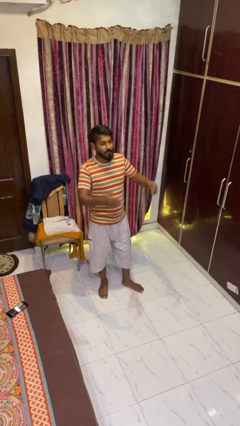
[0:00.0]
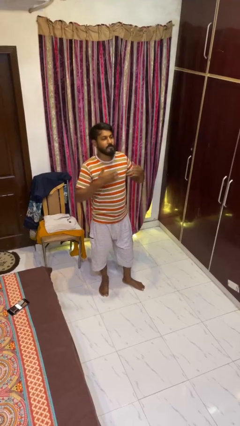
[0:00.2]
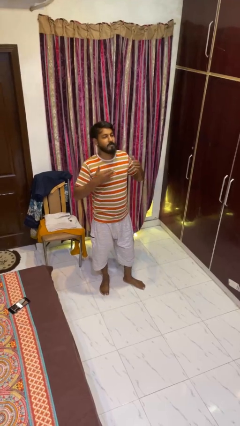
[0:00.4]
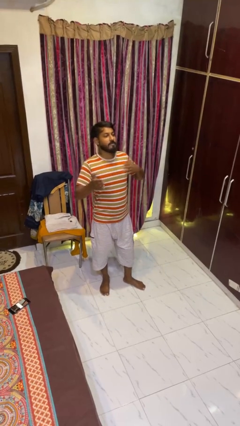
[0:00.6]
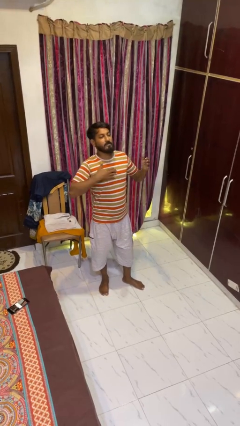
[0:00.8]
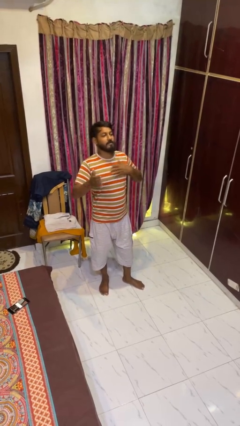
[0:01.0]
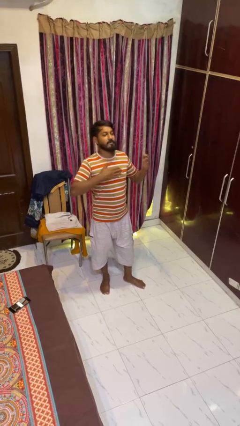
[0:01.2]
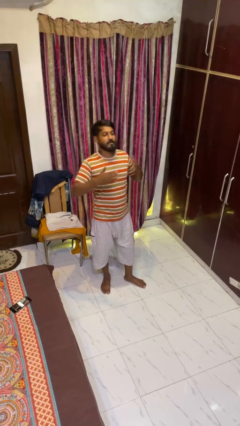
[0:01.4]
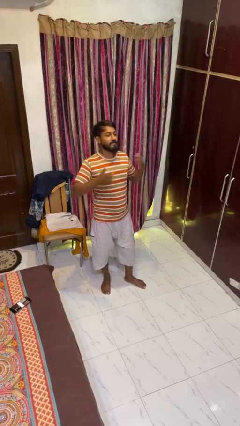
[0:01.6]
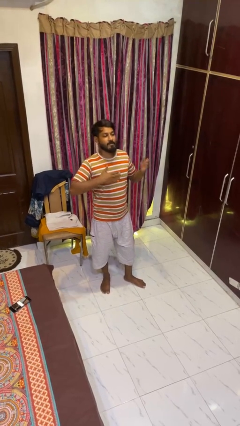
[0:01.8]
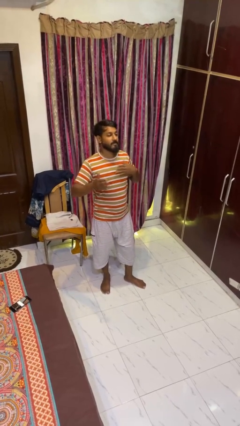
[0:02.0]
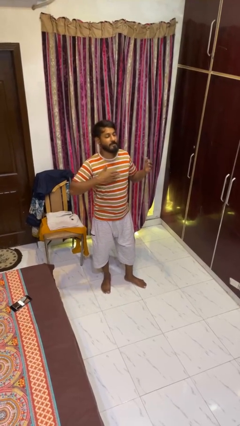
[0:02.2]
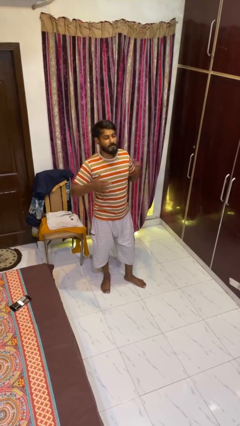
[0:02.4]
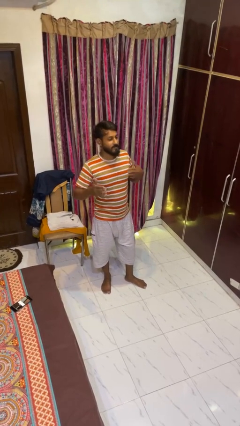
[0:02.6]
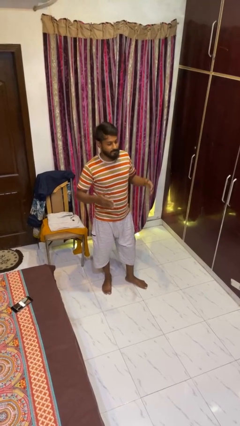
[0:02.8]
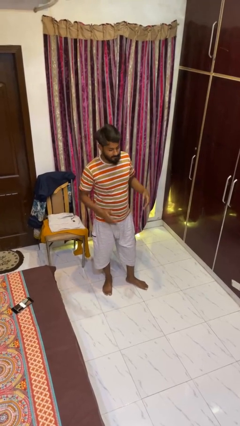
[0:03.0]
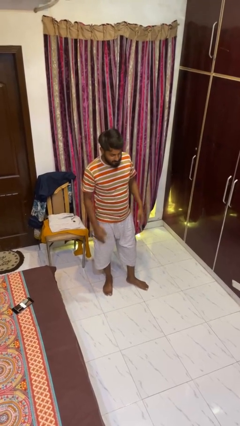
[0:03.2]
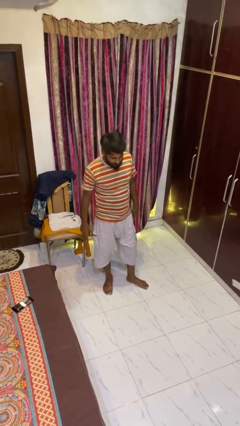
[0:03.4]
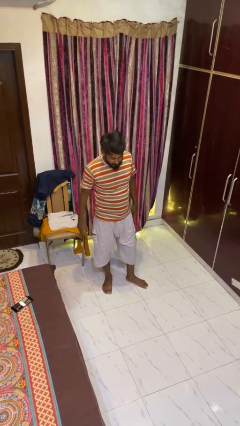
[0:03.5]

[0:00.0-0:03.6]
person drums on chest

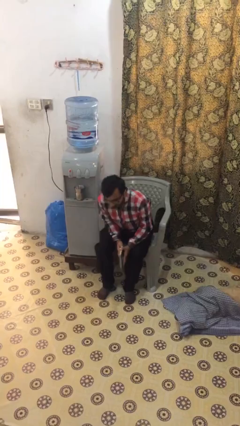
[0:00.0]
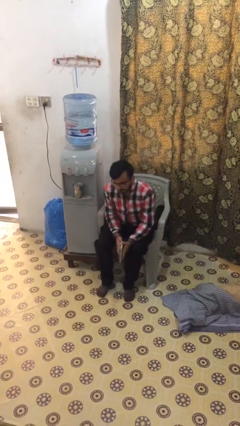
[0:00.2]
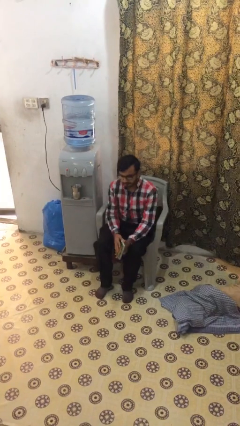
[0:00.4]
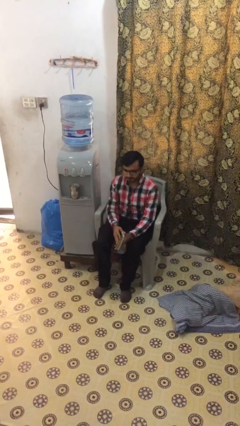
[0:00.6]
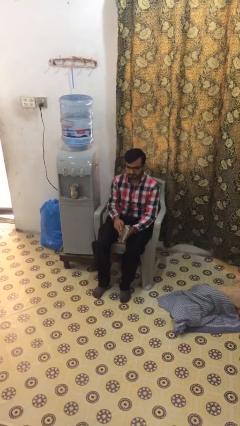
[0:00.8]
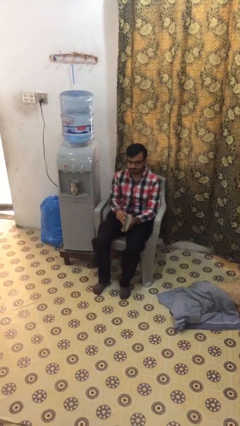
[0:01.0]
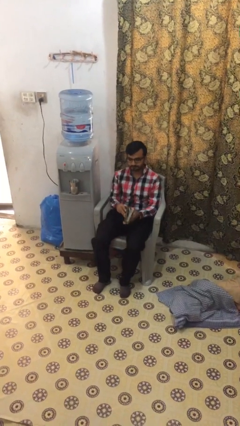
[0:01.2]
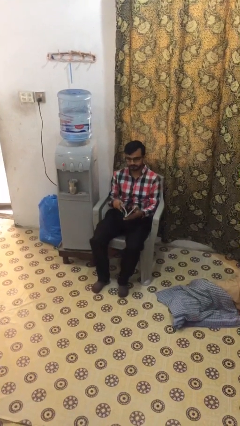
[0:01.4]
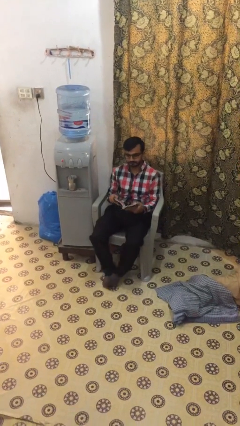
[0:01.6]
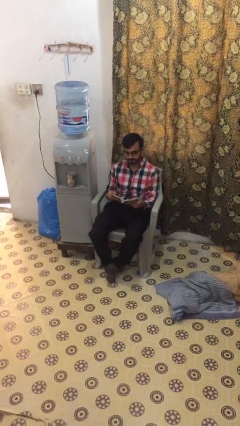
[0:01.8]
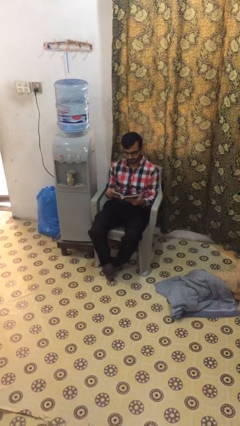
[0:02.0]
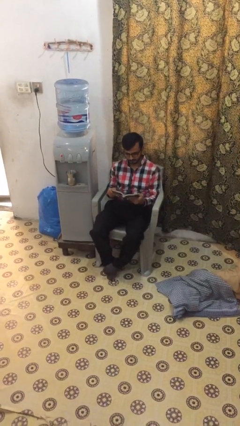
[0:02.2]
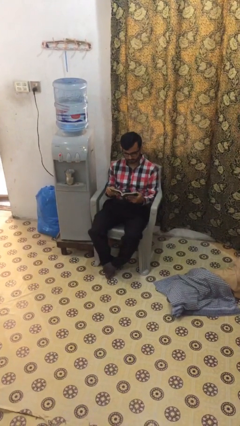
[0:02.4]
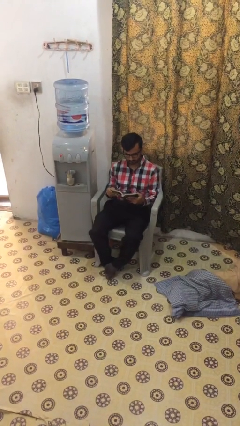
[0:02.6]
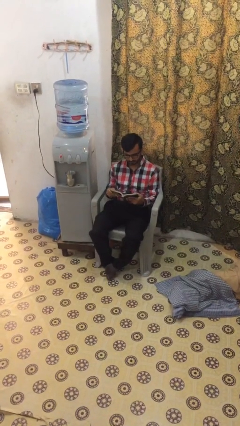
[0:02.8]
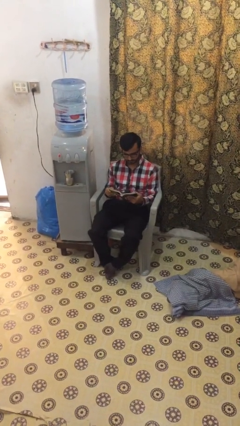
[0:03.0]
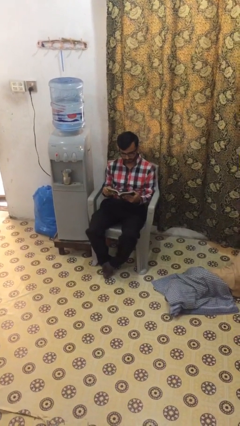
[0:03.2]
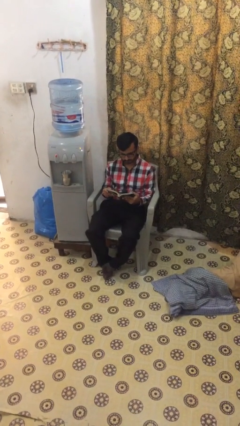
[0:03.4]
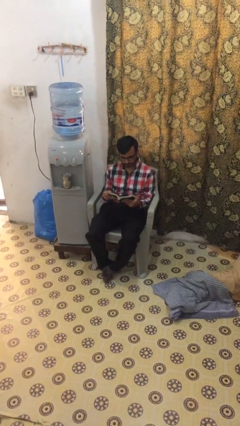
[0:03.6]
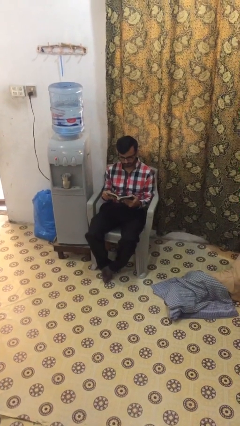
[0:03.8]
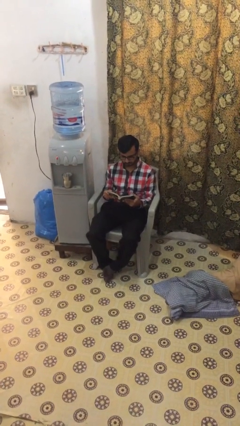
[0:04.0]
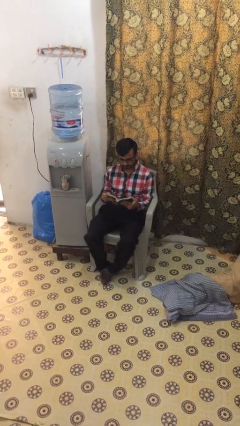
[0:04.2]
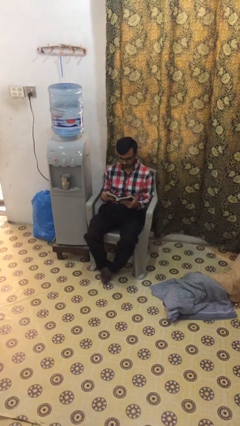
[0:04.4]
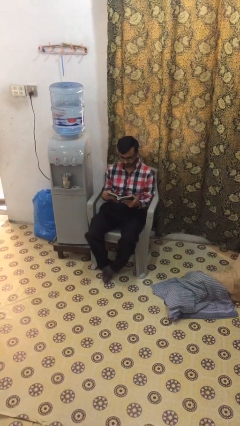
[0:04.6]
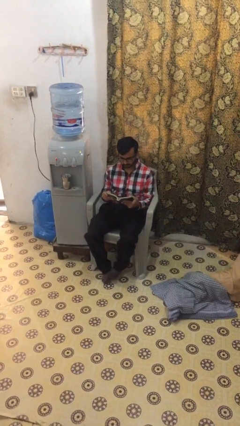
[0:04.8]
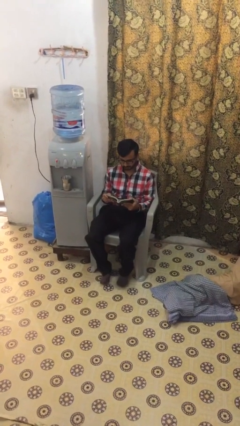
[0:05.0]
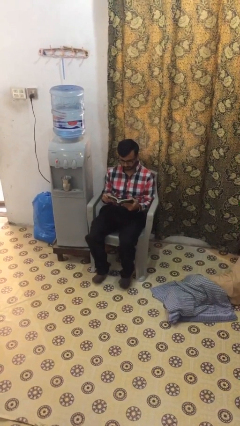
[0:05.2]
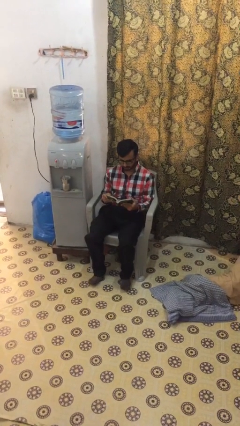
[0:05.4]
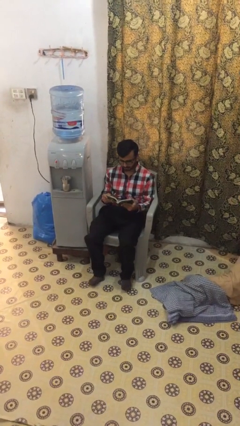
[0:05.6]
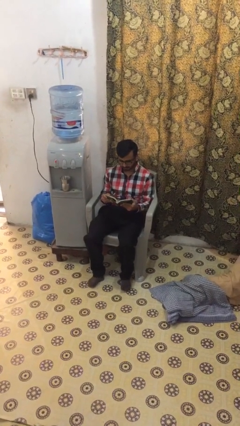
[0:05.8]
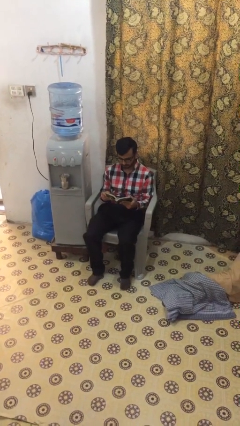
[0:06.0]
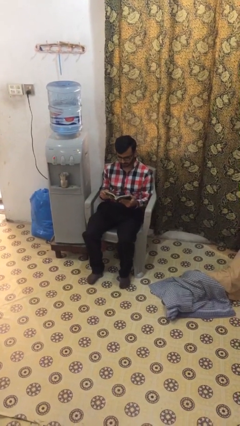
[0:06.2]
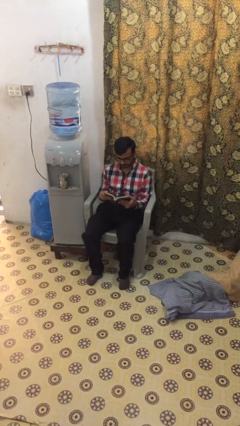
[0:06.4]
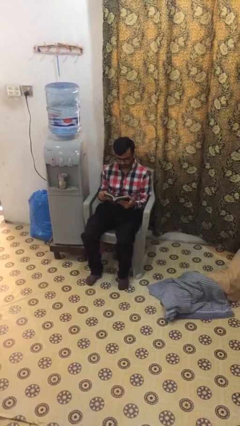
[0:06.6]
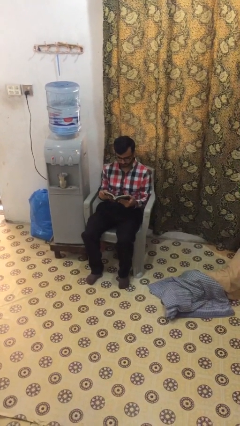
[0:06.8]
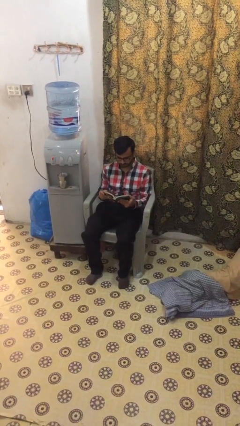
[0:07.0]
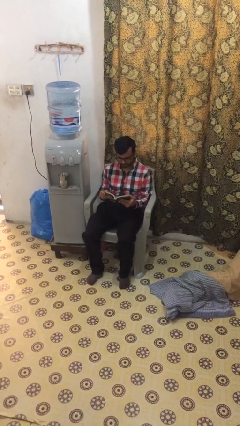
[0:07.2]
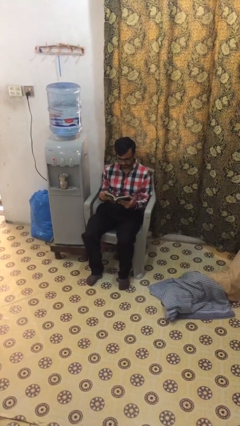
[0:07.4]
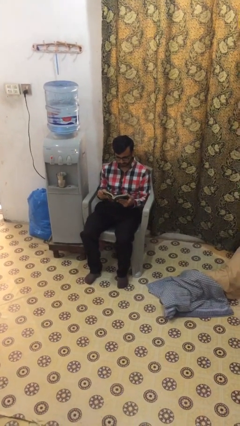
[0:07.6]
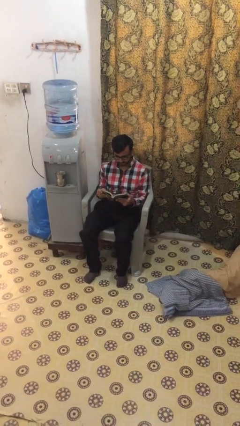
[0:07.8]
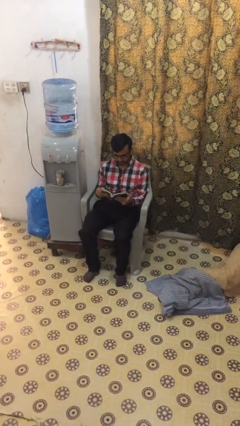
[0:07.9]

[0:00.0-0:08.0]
person reads document

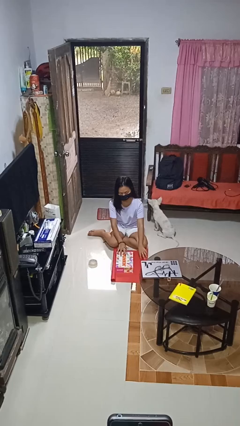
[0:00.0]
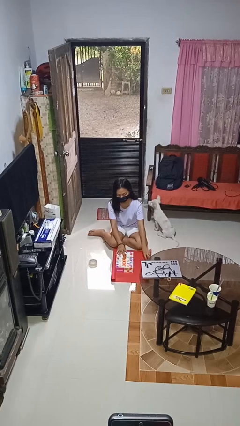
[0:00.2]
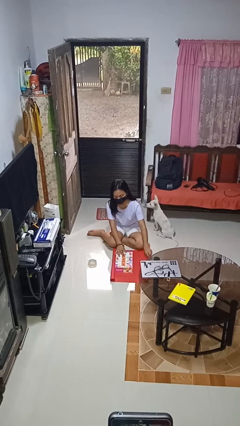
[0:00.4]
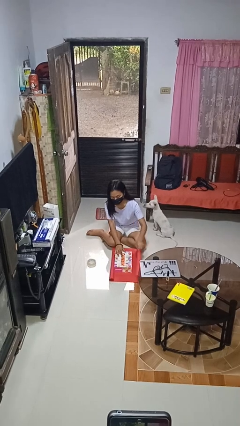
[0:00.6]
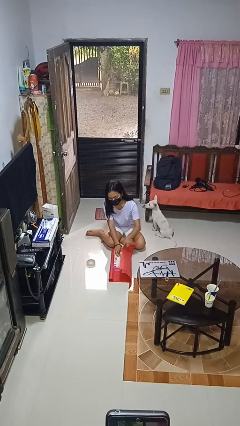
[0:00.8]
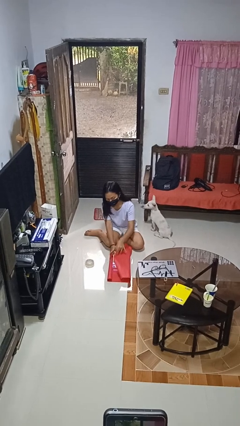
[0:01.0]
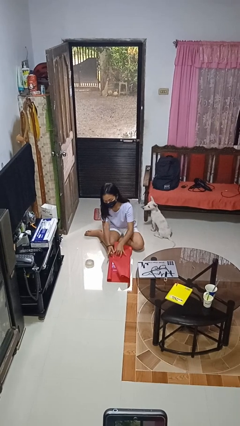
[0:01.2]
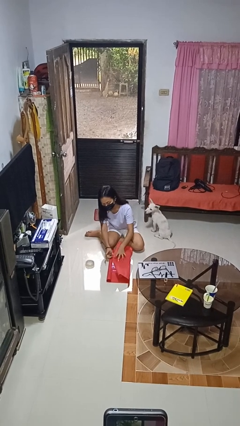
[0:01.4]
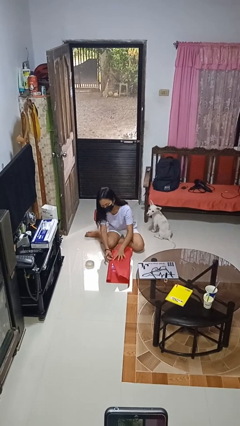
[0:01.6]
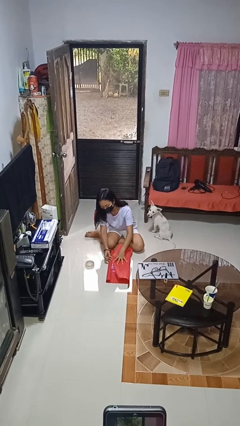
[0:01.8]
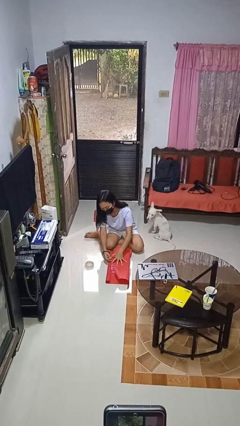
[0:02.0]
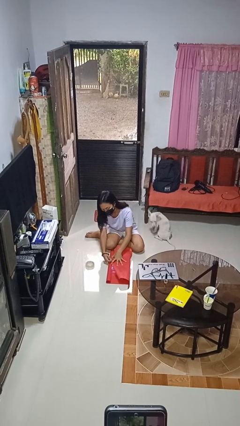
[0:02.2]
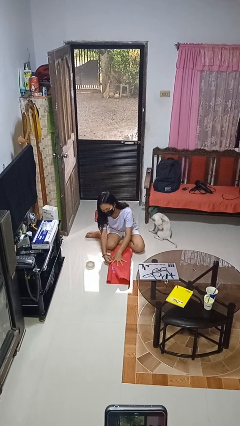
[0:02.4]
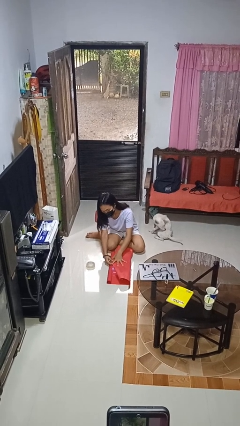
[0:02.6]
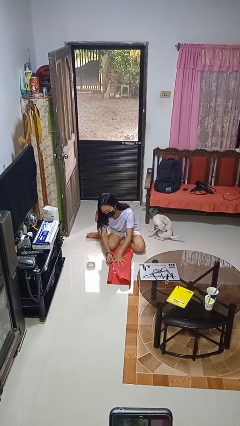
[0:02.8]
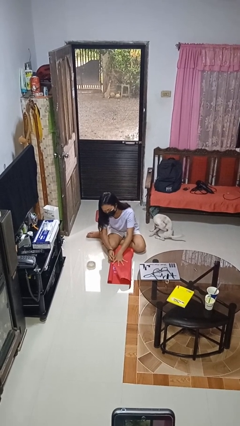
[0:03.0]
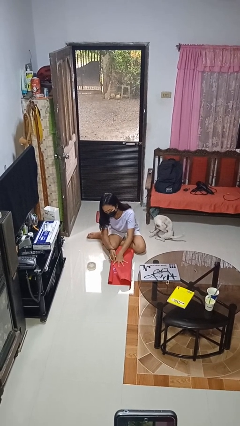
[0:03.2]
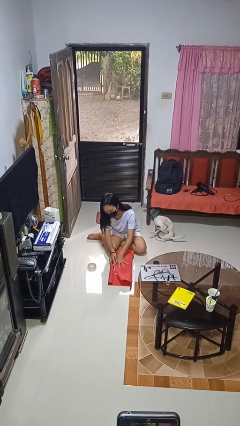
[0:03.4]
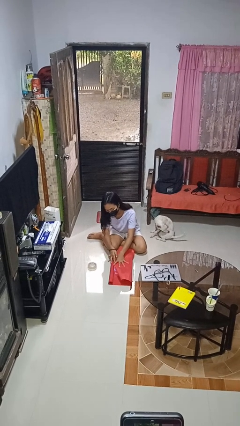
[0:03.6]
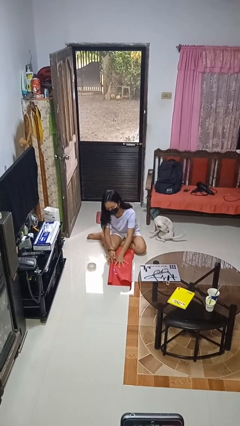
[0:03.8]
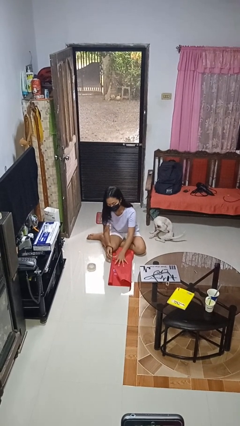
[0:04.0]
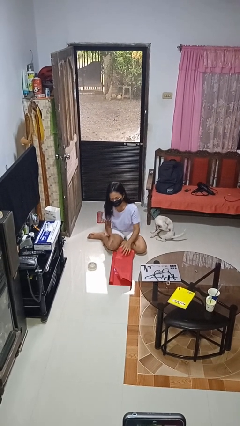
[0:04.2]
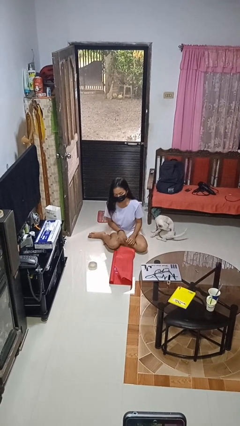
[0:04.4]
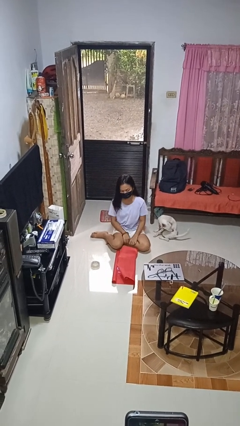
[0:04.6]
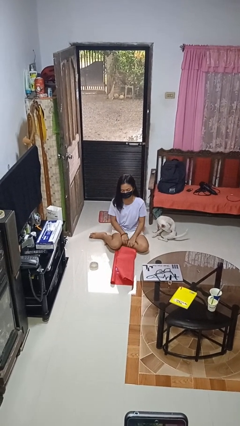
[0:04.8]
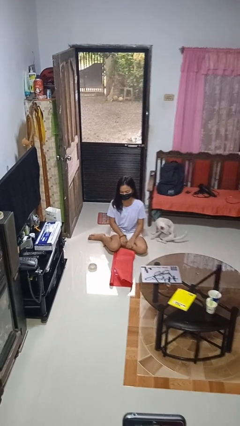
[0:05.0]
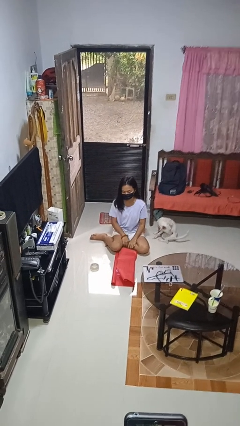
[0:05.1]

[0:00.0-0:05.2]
person wraps box

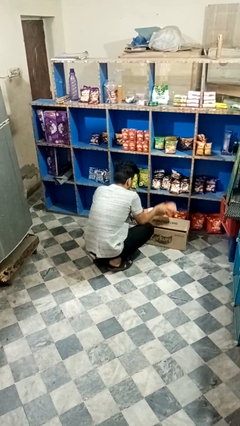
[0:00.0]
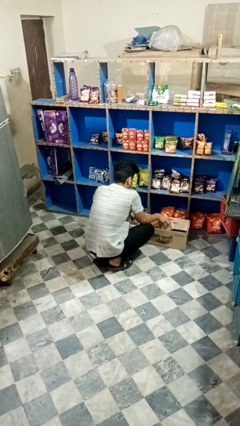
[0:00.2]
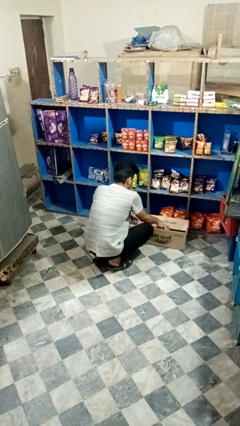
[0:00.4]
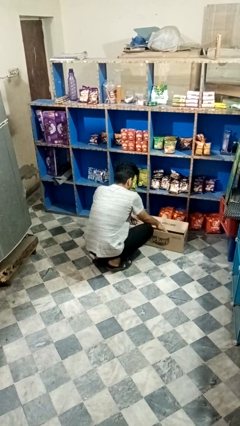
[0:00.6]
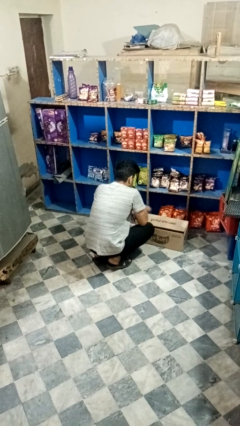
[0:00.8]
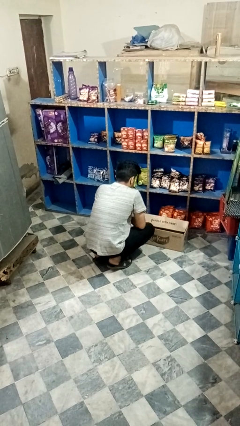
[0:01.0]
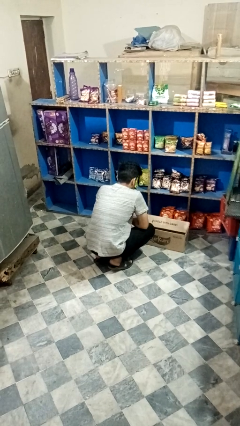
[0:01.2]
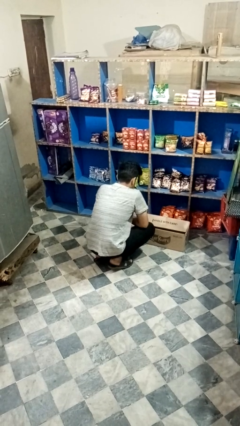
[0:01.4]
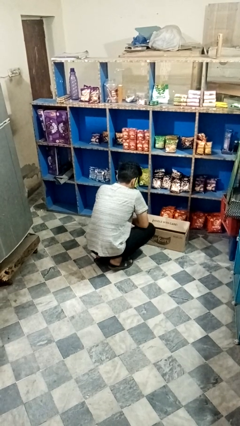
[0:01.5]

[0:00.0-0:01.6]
person puts object into box
